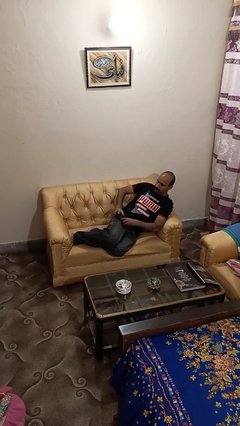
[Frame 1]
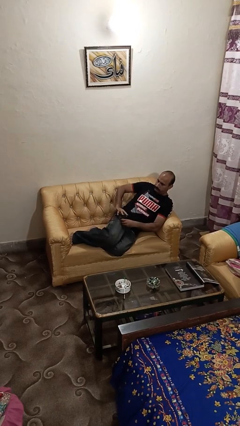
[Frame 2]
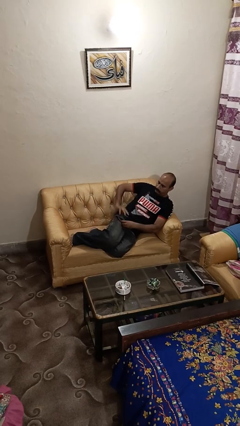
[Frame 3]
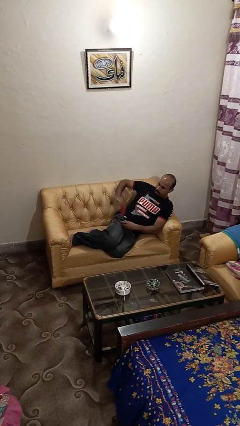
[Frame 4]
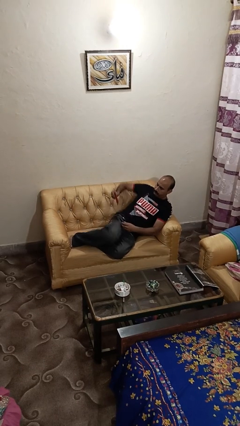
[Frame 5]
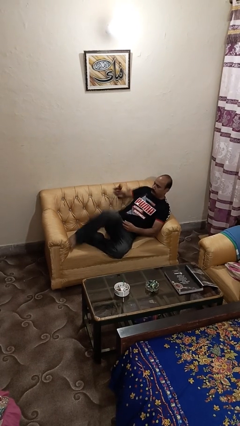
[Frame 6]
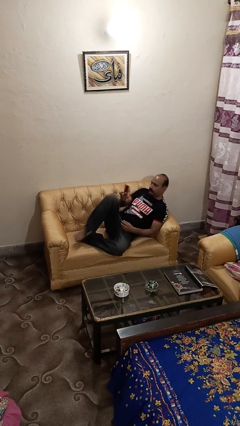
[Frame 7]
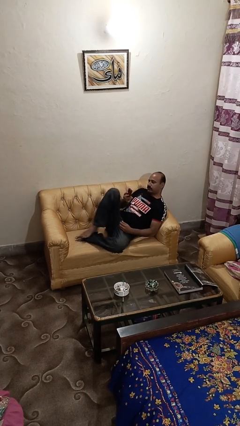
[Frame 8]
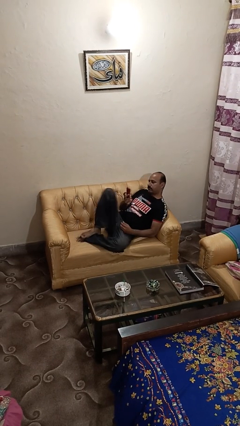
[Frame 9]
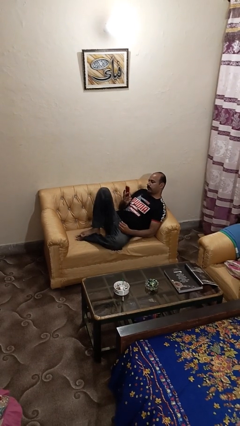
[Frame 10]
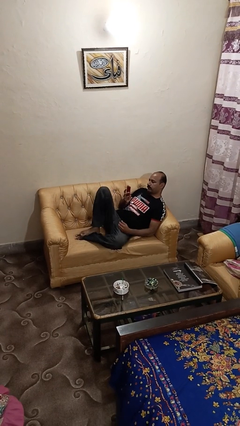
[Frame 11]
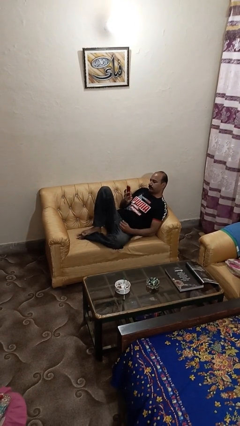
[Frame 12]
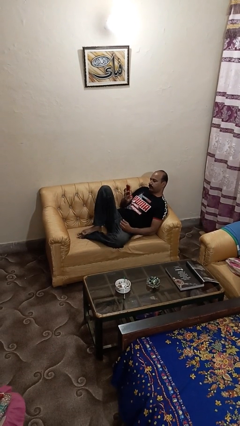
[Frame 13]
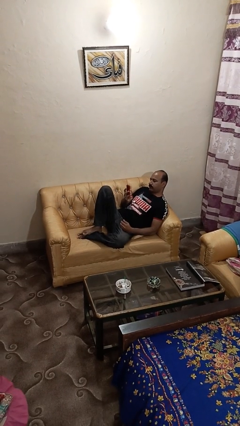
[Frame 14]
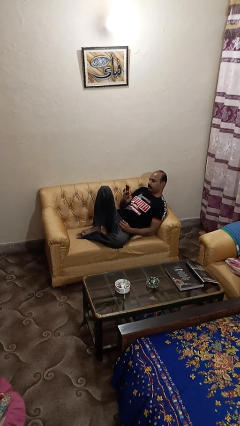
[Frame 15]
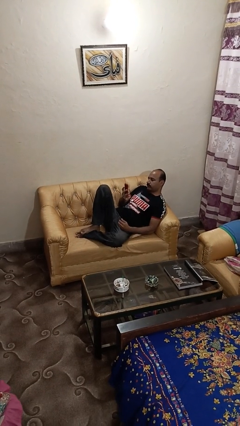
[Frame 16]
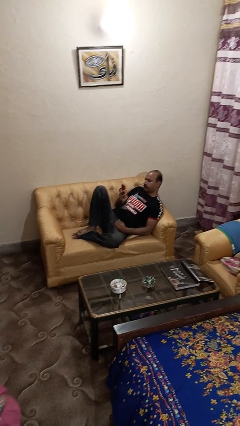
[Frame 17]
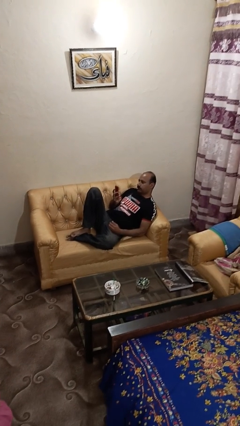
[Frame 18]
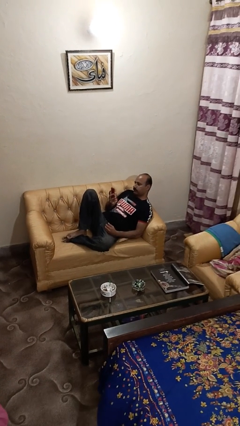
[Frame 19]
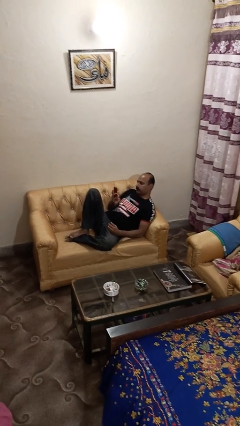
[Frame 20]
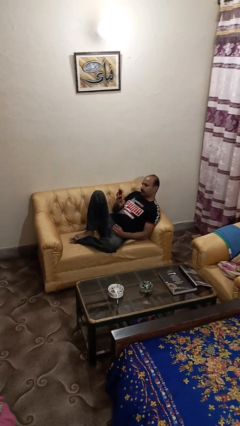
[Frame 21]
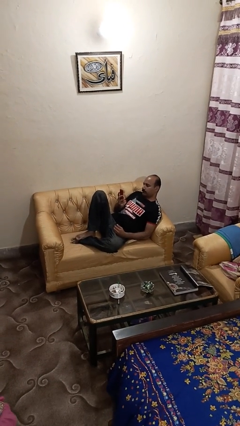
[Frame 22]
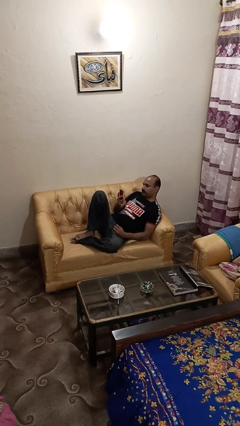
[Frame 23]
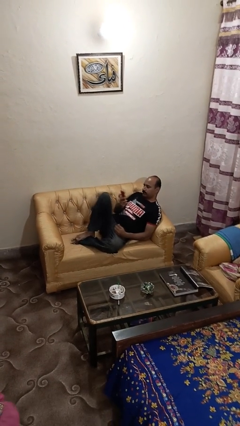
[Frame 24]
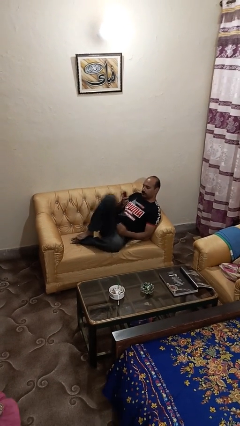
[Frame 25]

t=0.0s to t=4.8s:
person takes phone from pocket

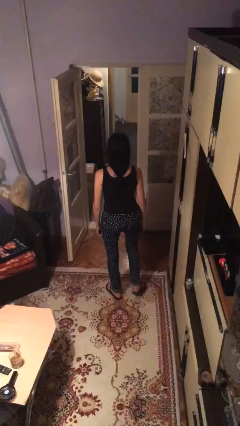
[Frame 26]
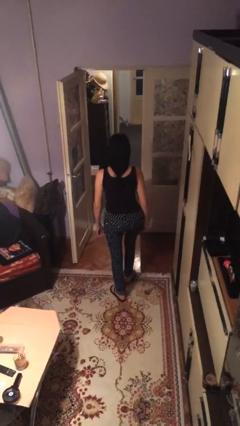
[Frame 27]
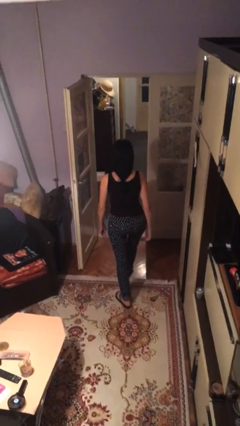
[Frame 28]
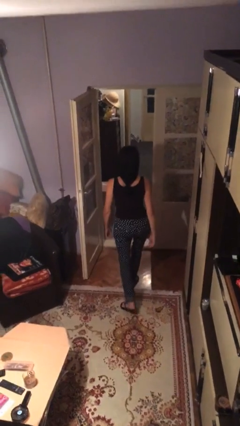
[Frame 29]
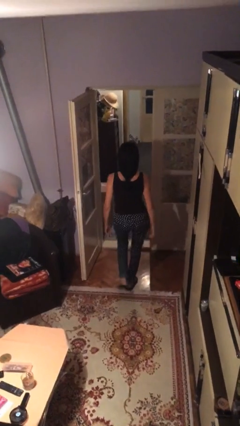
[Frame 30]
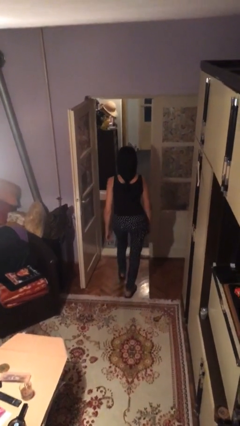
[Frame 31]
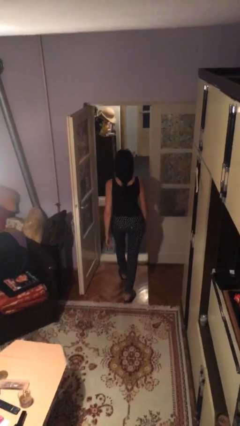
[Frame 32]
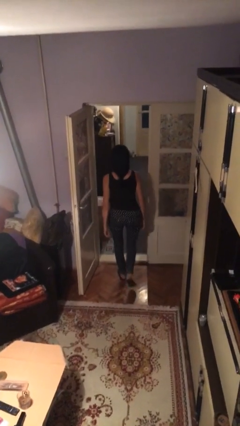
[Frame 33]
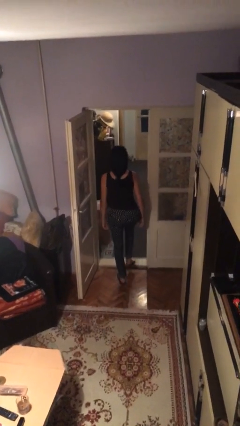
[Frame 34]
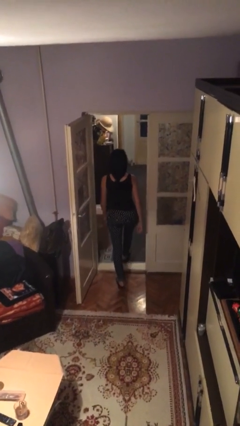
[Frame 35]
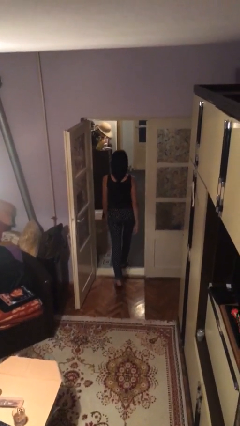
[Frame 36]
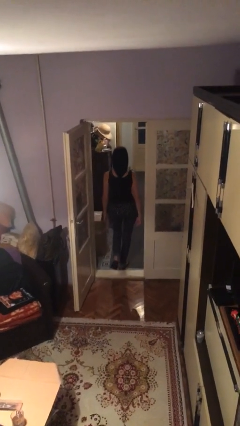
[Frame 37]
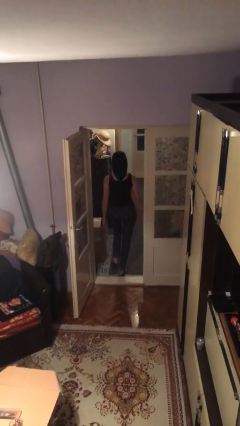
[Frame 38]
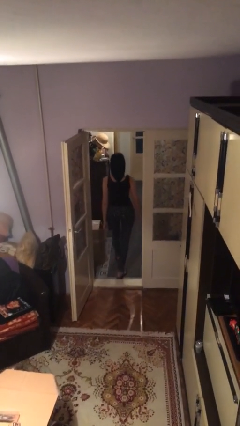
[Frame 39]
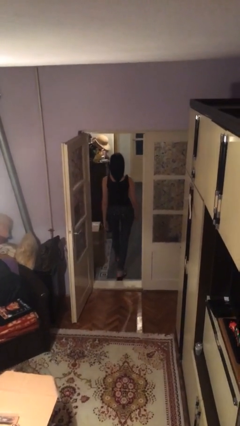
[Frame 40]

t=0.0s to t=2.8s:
person exits scene through structure

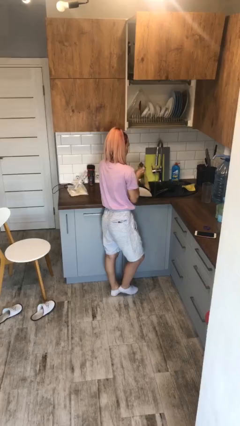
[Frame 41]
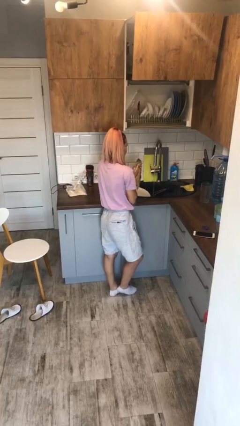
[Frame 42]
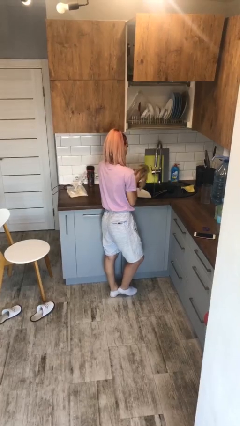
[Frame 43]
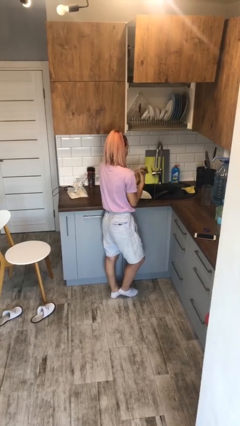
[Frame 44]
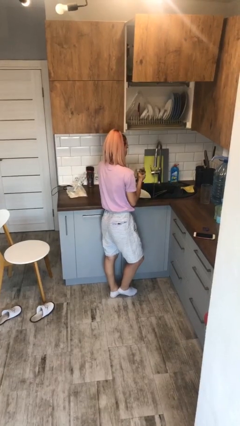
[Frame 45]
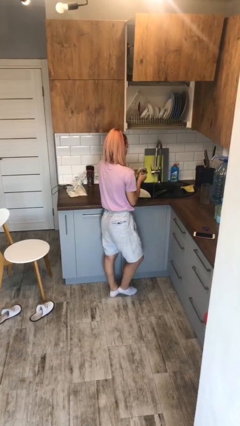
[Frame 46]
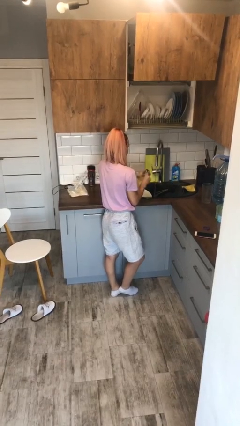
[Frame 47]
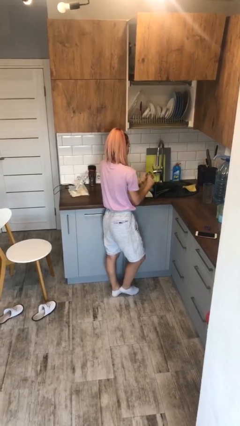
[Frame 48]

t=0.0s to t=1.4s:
person dries hands with towel

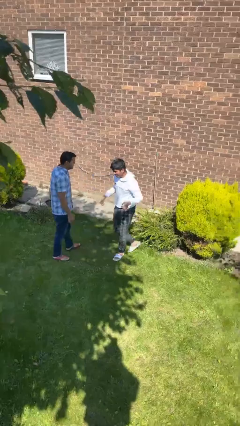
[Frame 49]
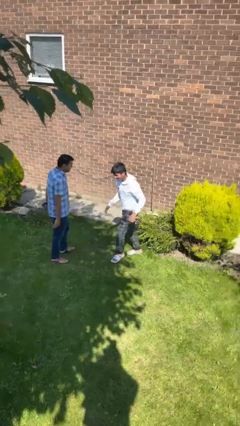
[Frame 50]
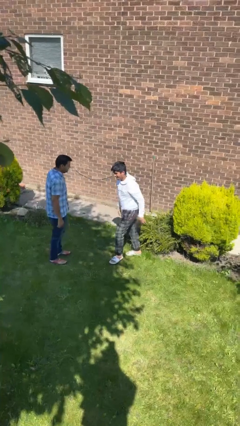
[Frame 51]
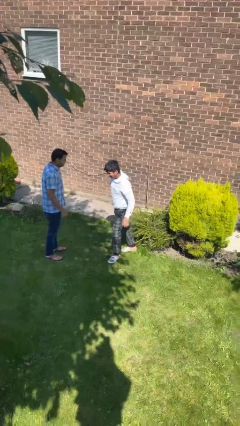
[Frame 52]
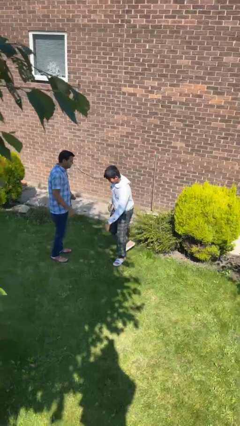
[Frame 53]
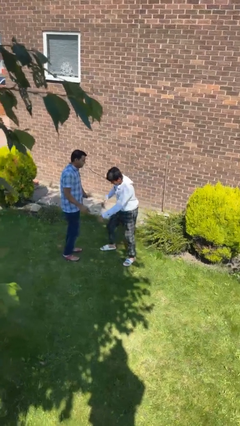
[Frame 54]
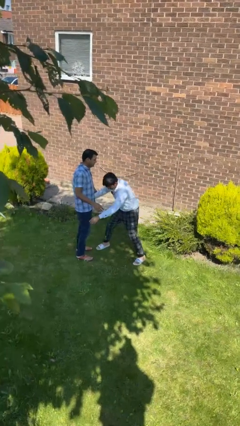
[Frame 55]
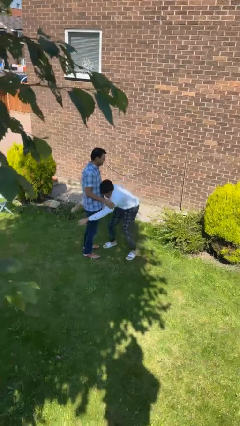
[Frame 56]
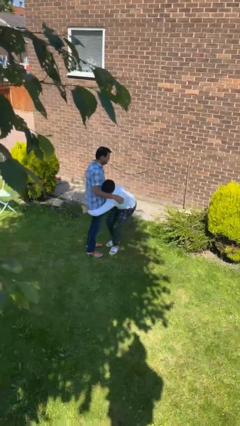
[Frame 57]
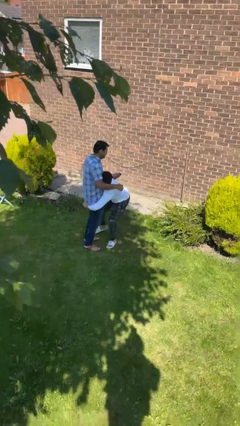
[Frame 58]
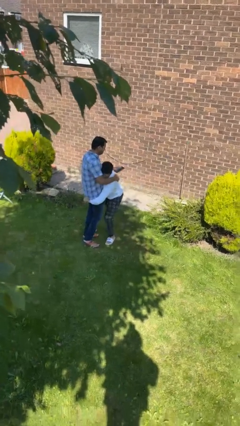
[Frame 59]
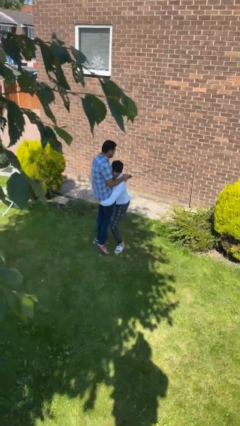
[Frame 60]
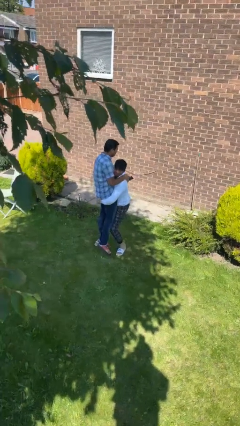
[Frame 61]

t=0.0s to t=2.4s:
person picks up person

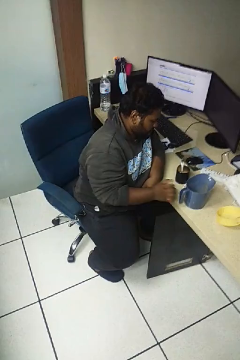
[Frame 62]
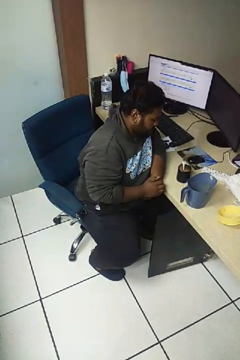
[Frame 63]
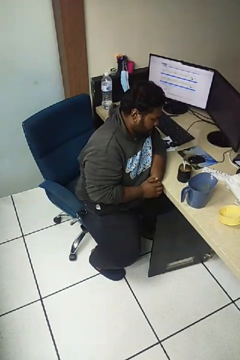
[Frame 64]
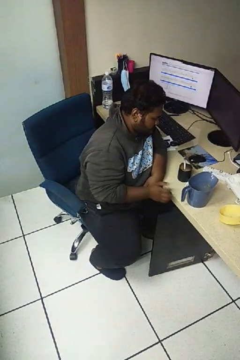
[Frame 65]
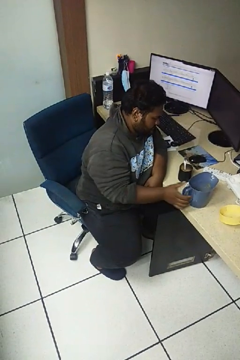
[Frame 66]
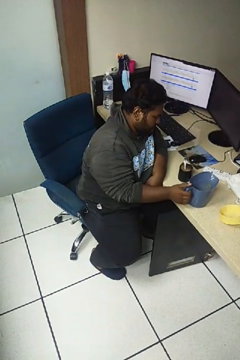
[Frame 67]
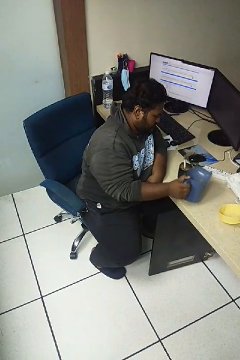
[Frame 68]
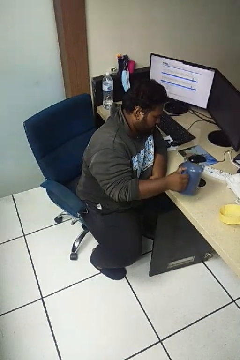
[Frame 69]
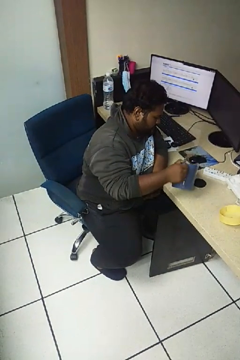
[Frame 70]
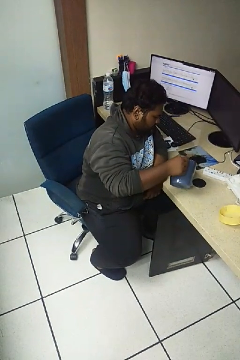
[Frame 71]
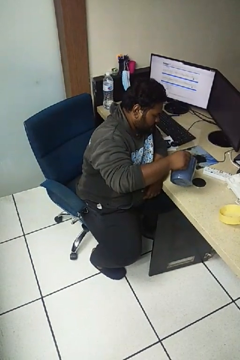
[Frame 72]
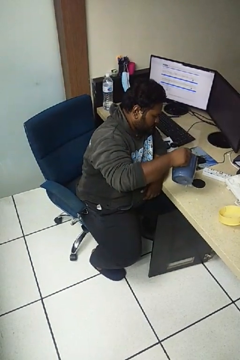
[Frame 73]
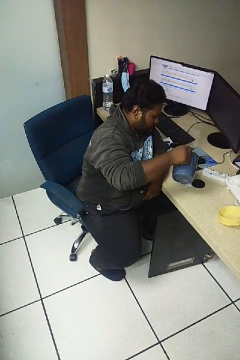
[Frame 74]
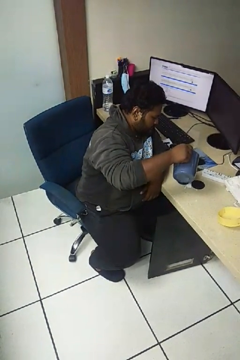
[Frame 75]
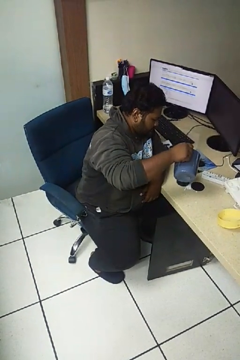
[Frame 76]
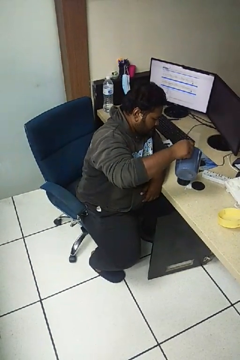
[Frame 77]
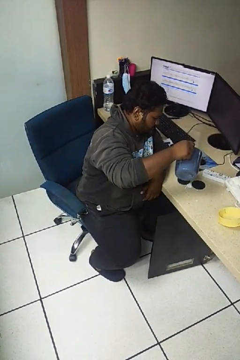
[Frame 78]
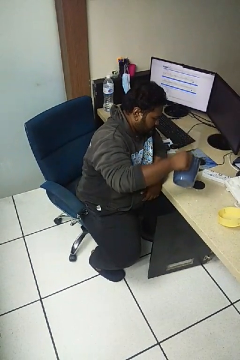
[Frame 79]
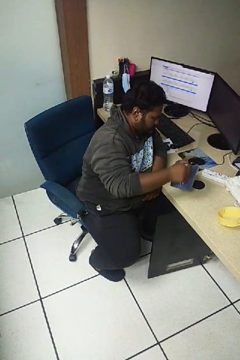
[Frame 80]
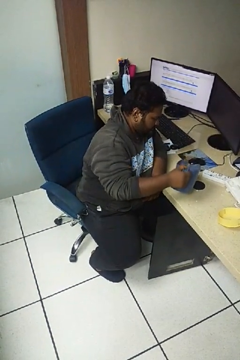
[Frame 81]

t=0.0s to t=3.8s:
person pours coffee into mug

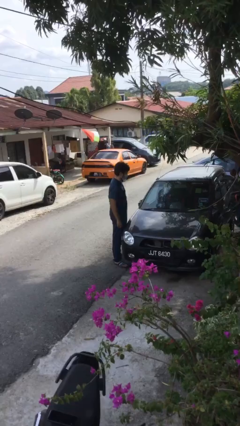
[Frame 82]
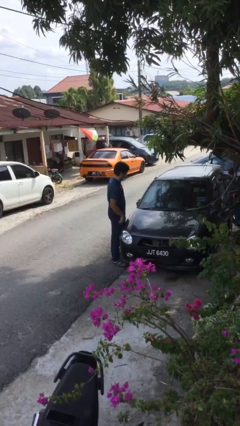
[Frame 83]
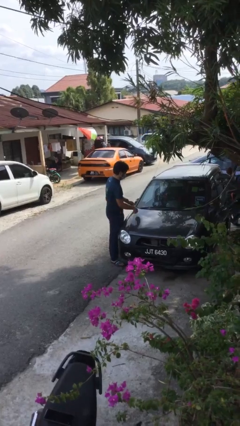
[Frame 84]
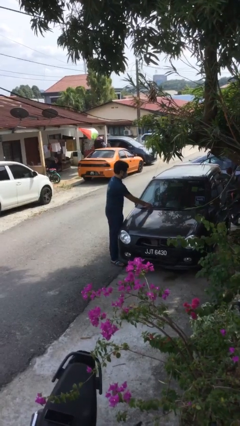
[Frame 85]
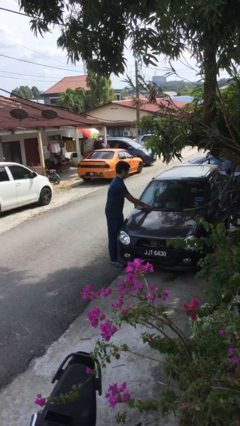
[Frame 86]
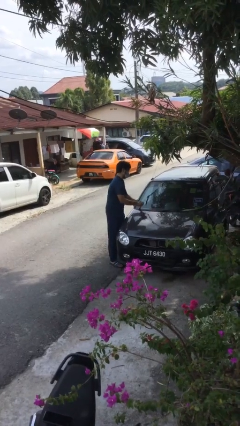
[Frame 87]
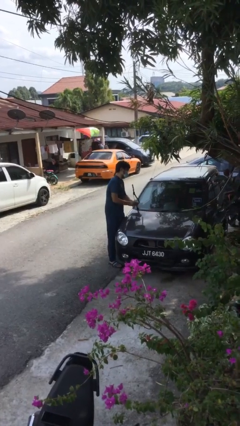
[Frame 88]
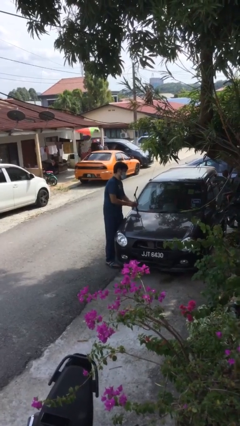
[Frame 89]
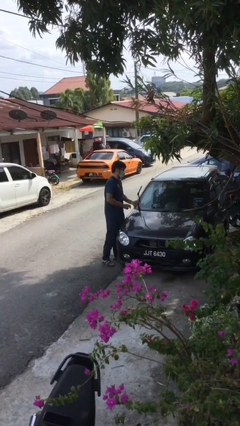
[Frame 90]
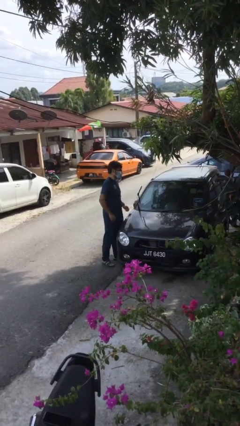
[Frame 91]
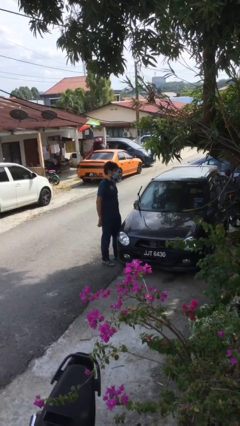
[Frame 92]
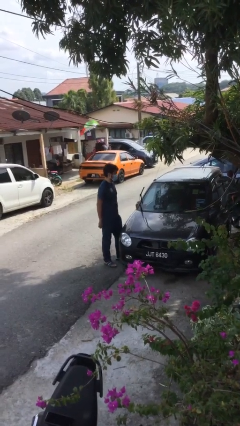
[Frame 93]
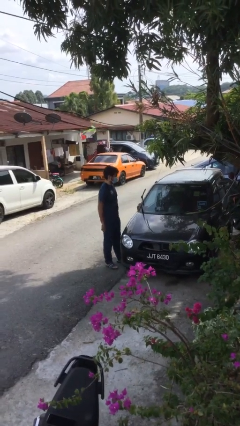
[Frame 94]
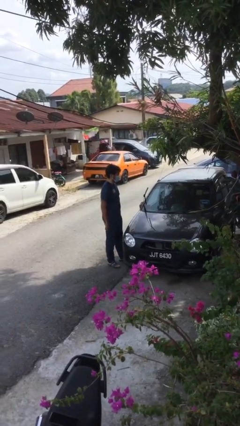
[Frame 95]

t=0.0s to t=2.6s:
person flips up car wipers

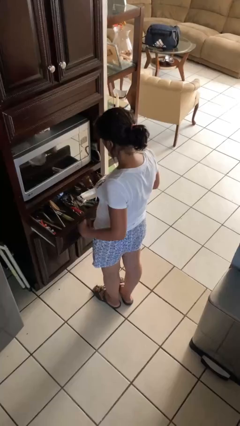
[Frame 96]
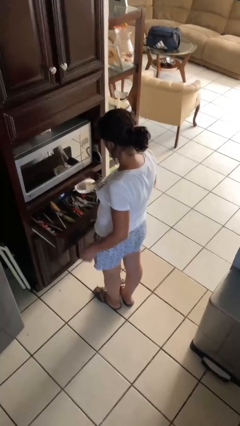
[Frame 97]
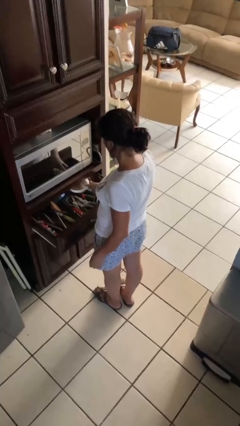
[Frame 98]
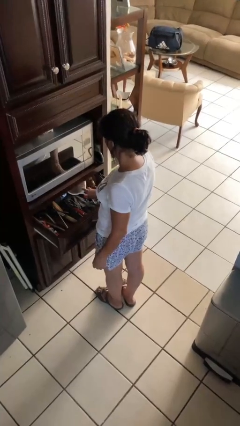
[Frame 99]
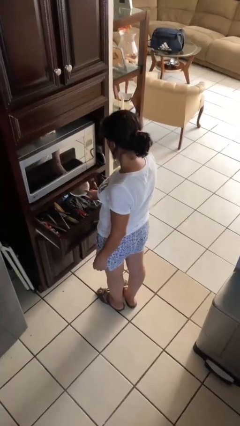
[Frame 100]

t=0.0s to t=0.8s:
person puts object into kitchen drawer
